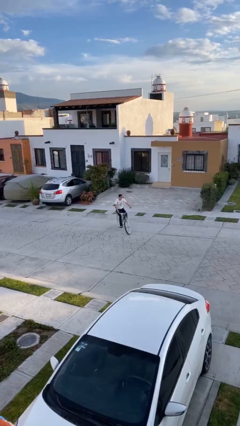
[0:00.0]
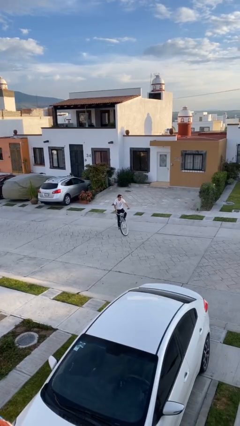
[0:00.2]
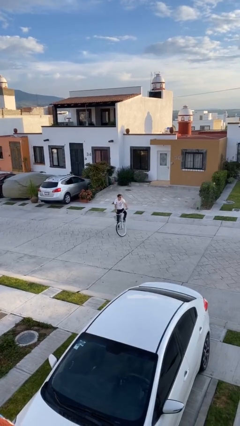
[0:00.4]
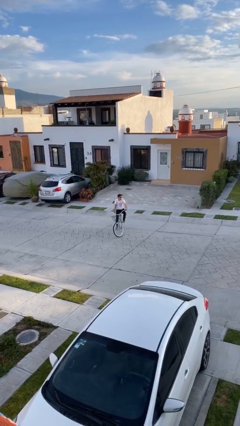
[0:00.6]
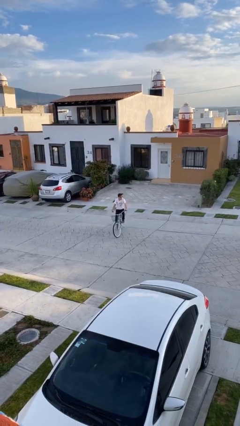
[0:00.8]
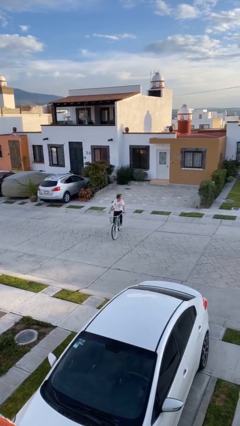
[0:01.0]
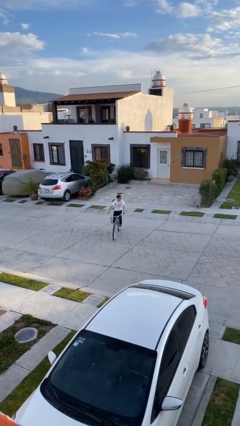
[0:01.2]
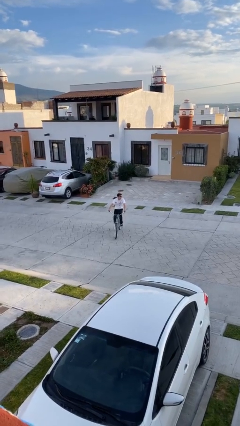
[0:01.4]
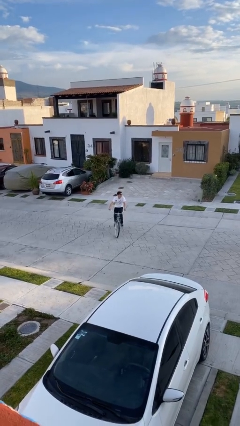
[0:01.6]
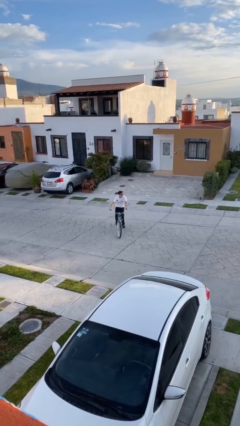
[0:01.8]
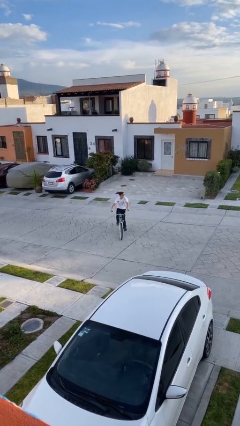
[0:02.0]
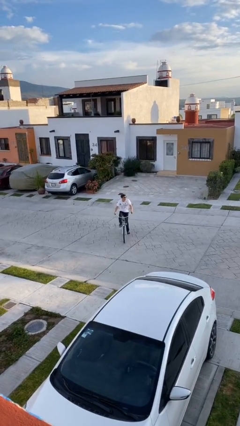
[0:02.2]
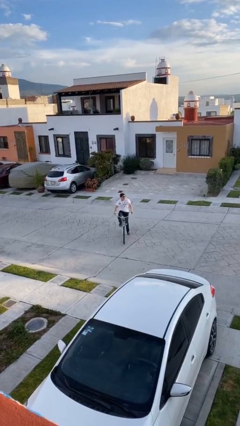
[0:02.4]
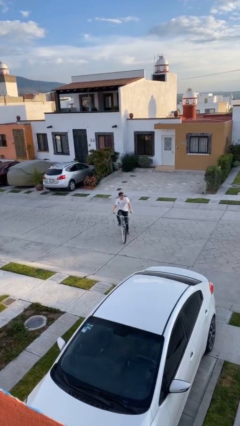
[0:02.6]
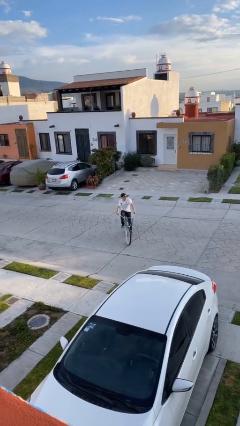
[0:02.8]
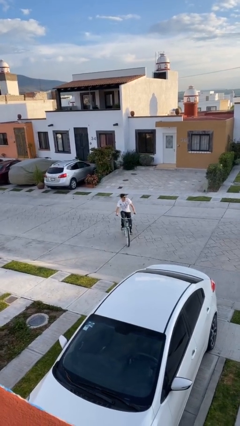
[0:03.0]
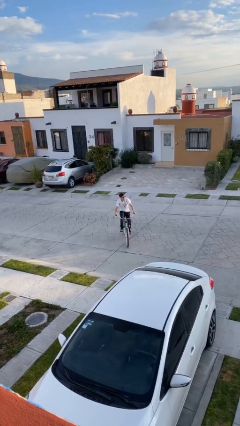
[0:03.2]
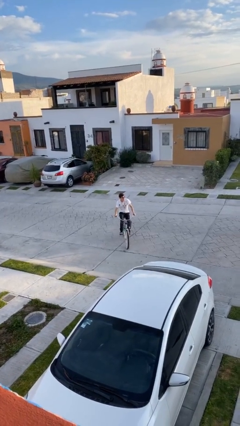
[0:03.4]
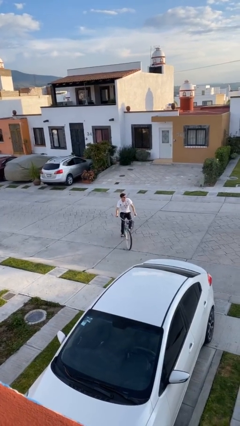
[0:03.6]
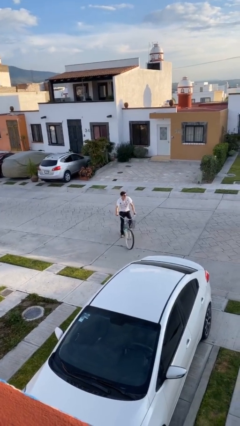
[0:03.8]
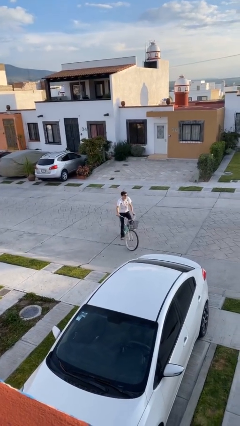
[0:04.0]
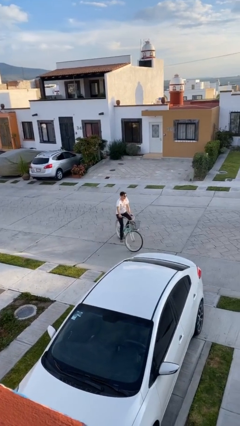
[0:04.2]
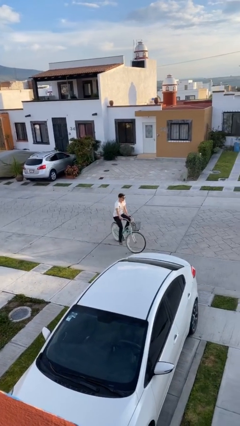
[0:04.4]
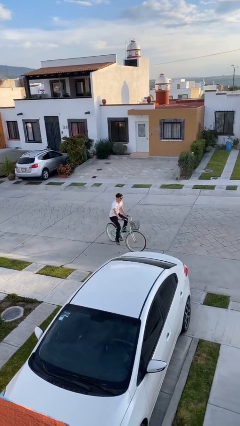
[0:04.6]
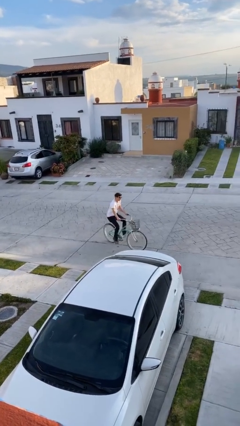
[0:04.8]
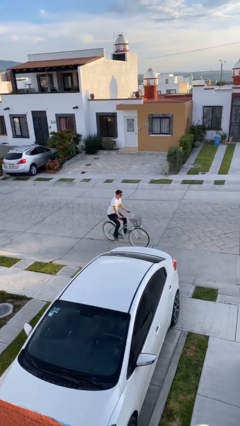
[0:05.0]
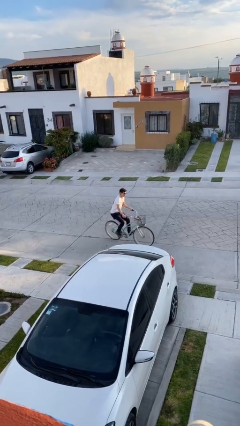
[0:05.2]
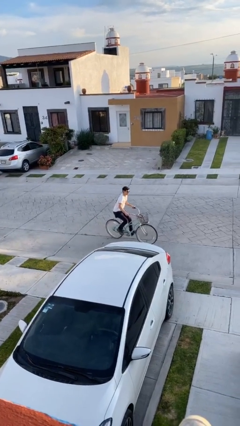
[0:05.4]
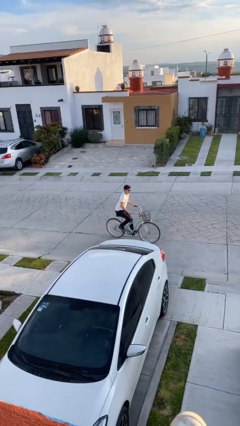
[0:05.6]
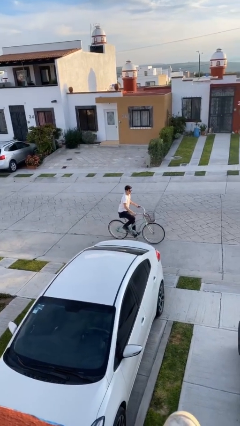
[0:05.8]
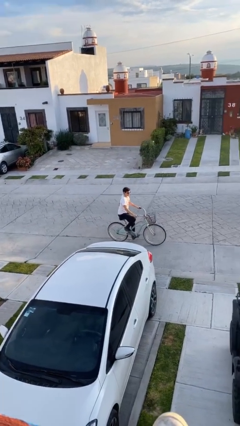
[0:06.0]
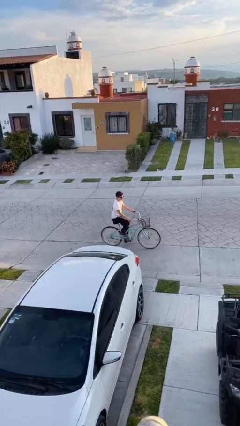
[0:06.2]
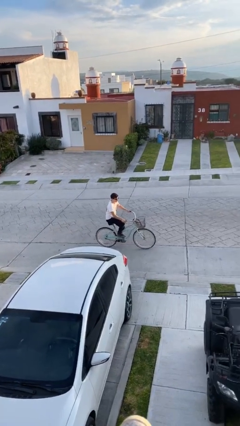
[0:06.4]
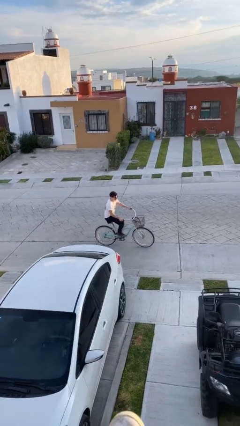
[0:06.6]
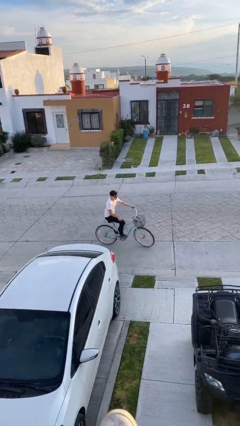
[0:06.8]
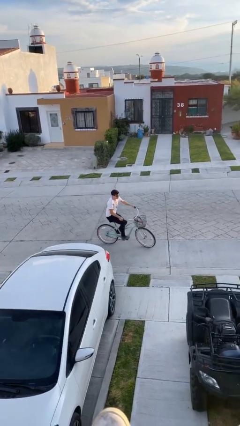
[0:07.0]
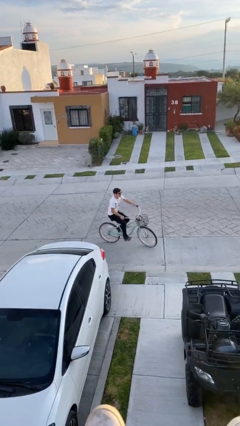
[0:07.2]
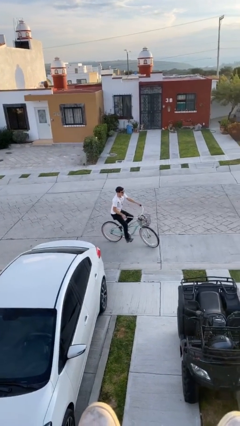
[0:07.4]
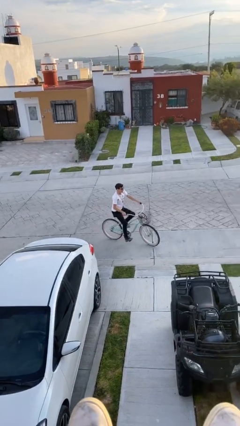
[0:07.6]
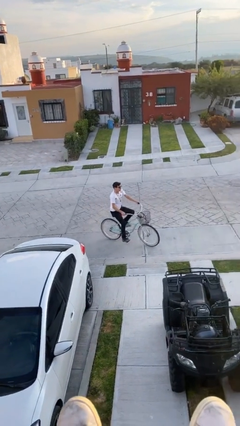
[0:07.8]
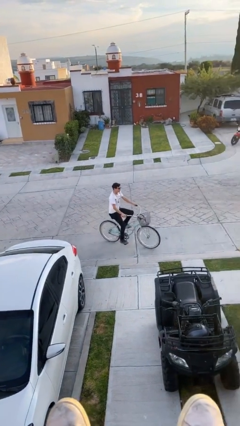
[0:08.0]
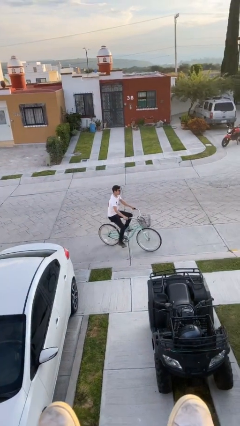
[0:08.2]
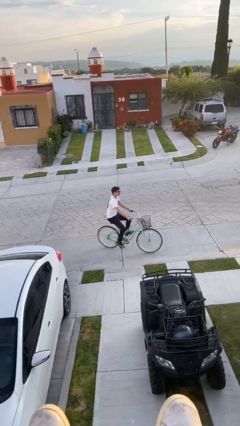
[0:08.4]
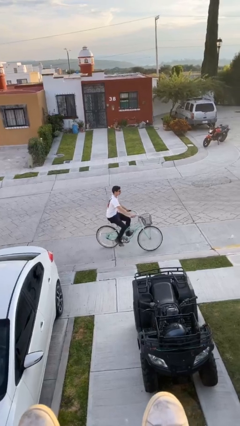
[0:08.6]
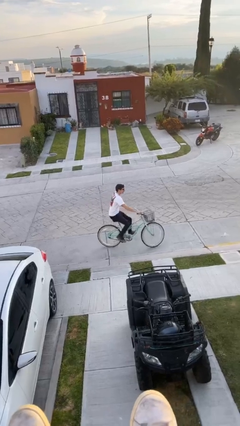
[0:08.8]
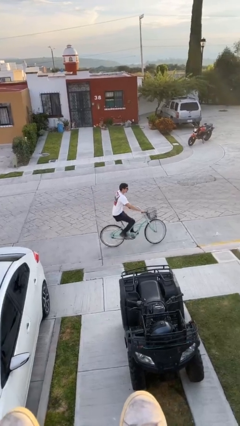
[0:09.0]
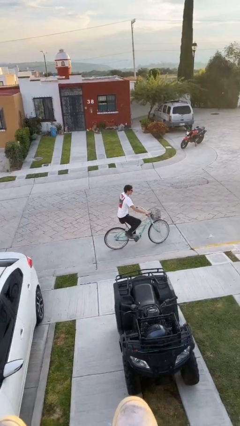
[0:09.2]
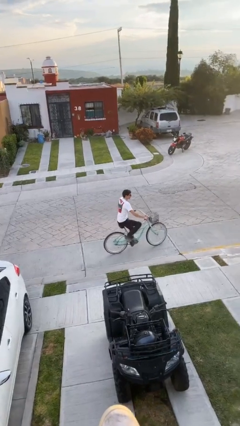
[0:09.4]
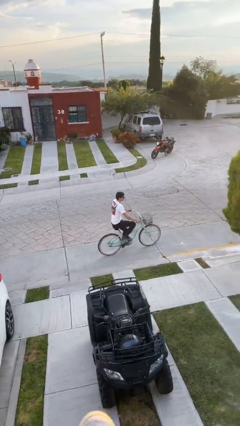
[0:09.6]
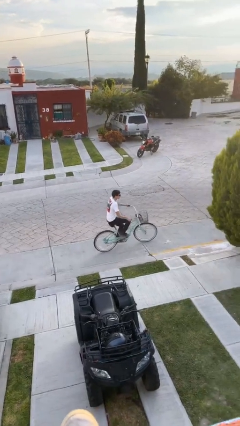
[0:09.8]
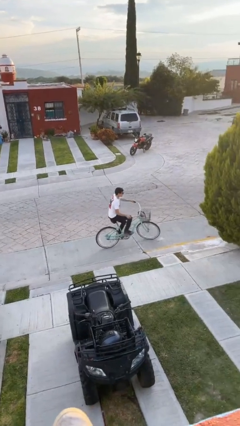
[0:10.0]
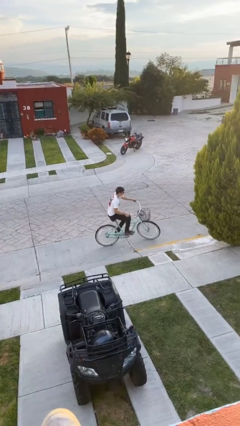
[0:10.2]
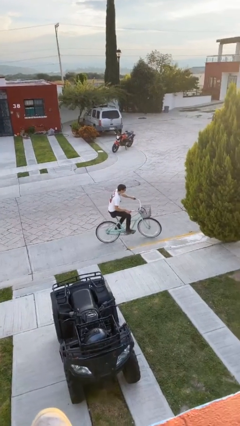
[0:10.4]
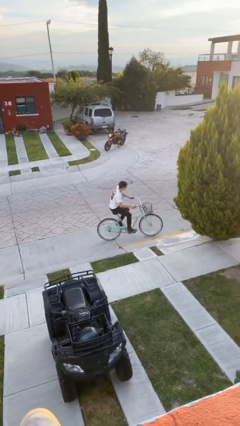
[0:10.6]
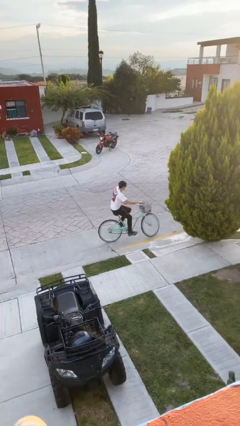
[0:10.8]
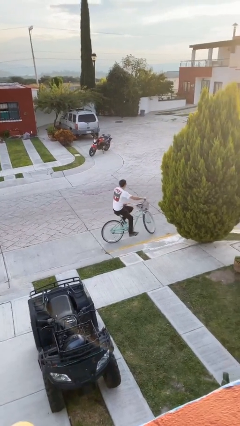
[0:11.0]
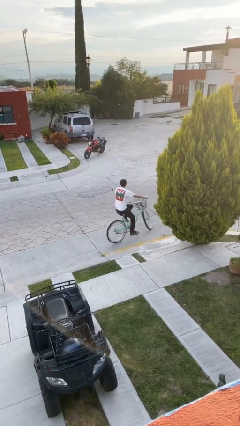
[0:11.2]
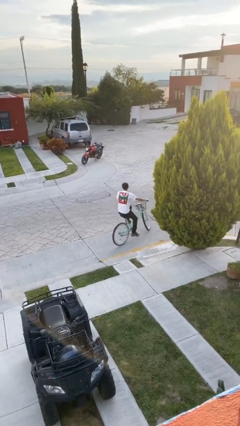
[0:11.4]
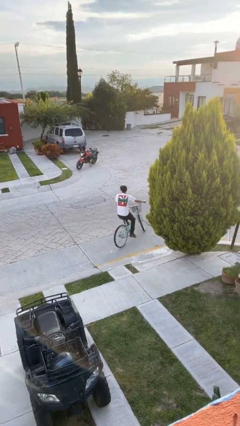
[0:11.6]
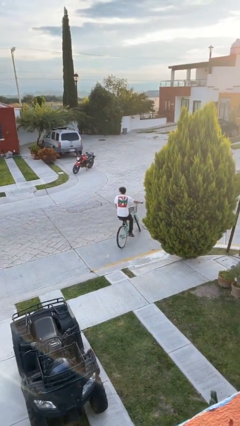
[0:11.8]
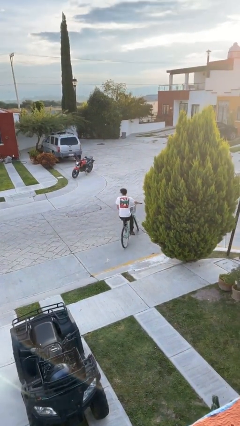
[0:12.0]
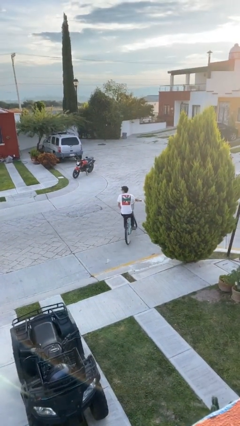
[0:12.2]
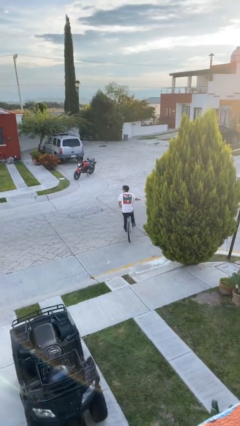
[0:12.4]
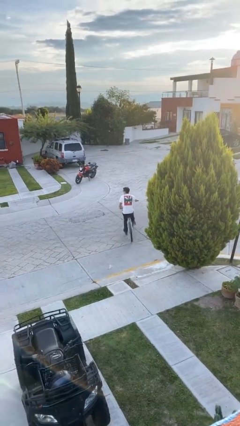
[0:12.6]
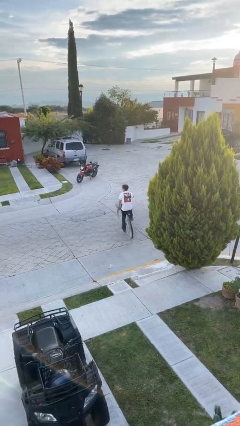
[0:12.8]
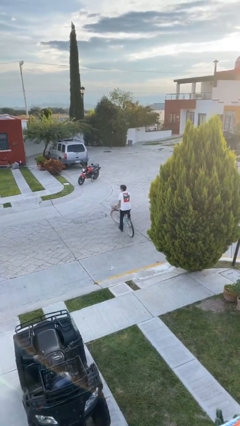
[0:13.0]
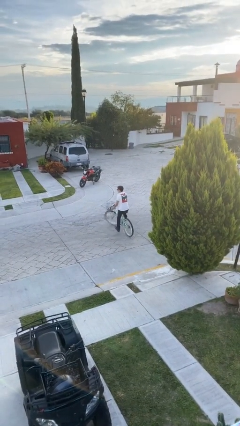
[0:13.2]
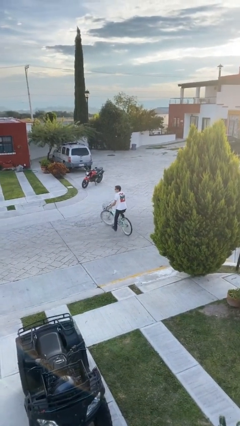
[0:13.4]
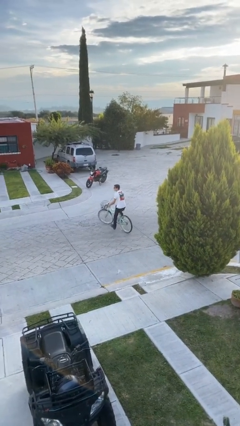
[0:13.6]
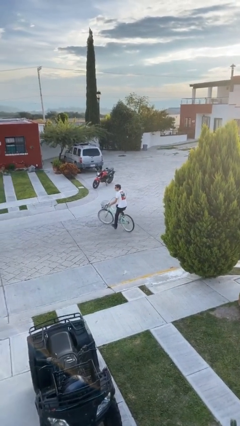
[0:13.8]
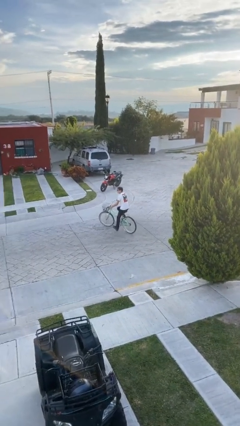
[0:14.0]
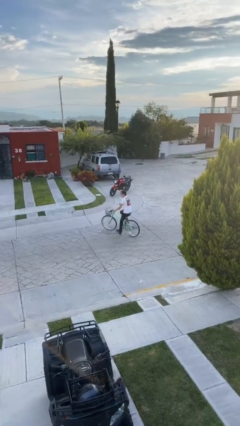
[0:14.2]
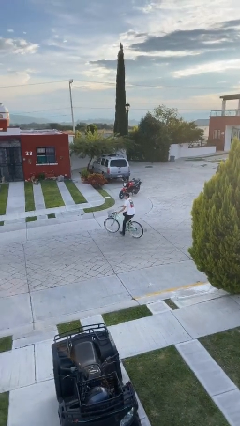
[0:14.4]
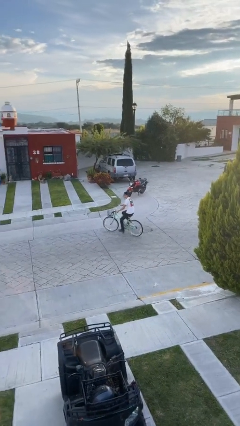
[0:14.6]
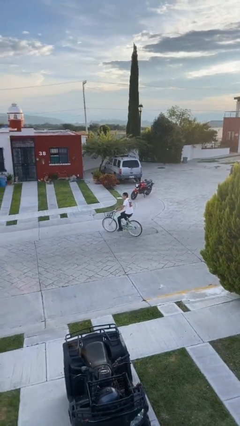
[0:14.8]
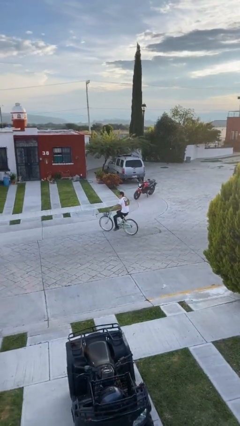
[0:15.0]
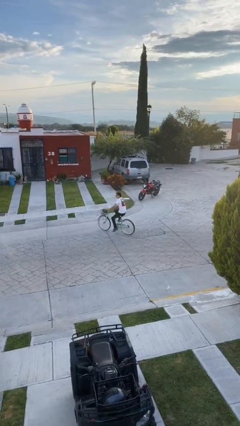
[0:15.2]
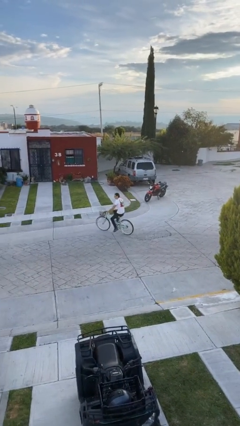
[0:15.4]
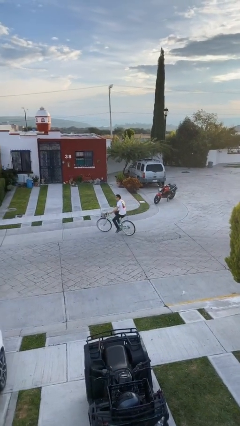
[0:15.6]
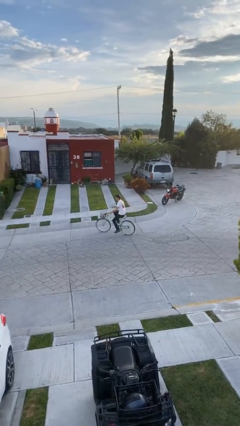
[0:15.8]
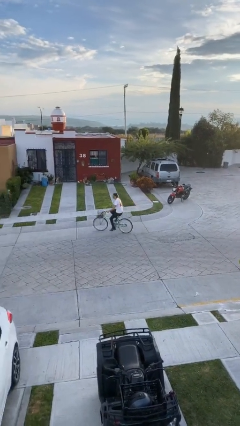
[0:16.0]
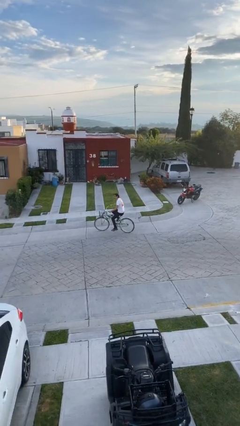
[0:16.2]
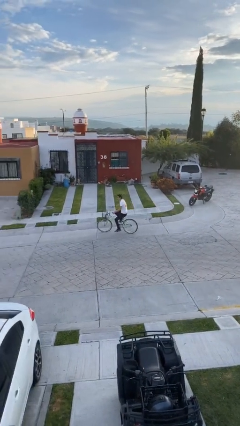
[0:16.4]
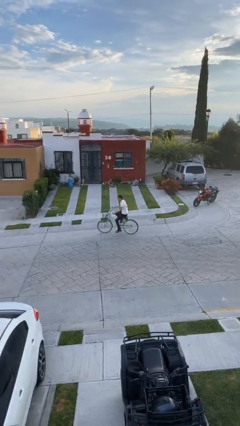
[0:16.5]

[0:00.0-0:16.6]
person rides bicycle

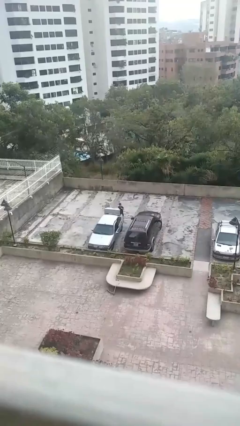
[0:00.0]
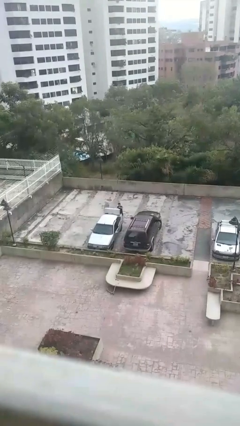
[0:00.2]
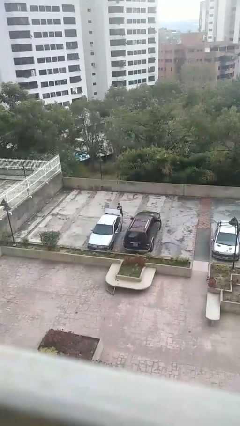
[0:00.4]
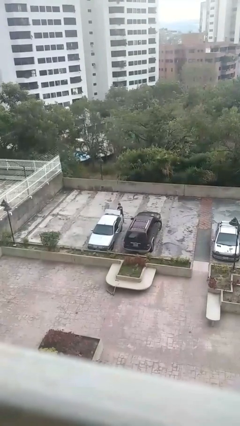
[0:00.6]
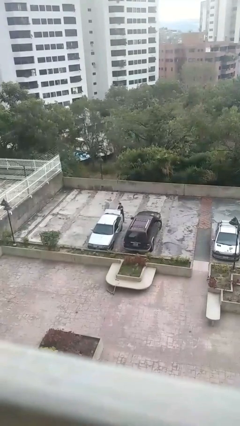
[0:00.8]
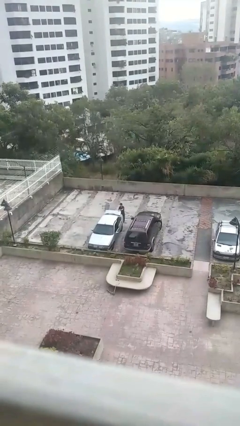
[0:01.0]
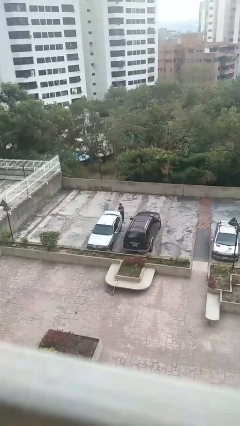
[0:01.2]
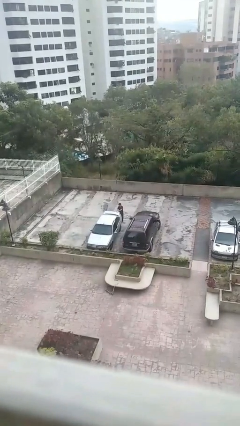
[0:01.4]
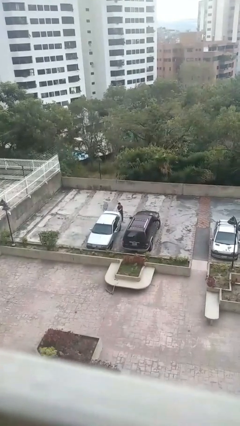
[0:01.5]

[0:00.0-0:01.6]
person closes car trunk
